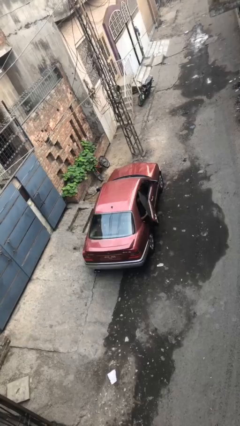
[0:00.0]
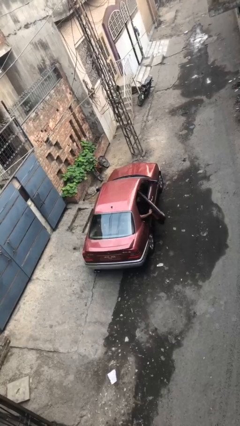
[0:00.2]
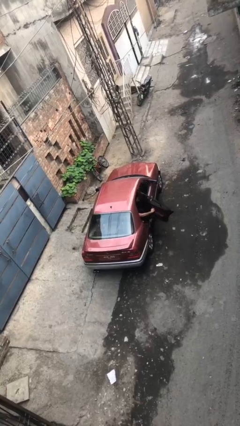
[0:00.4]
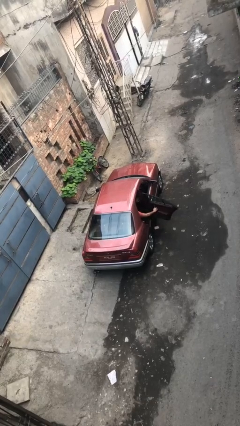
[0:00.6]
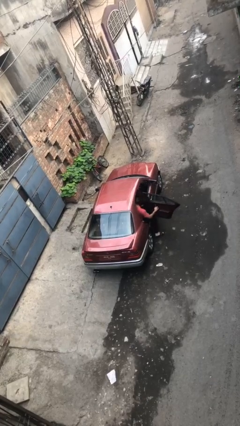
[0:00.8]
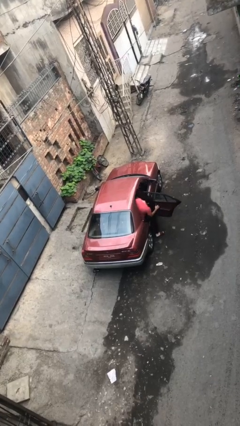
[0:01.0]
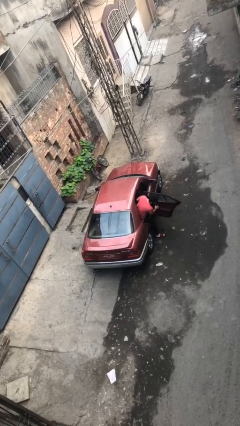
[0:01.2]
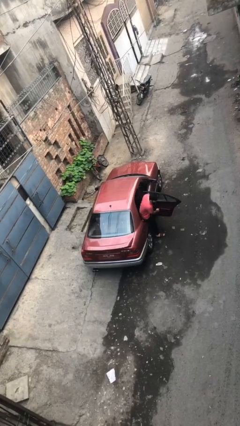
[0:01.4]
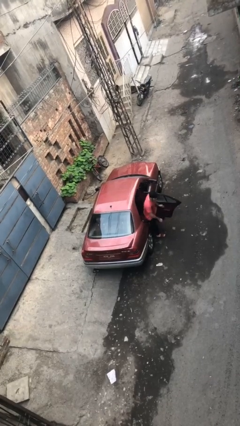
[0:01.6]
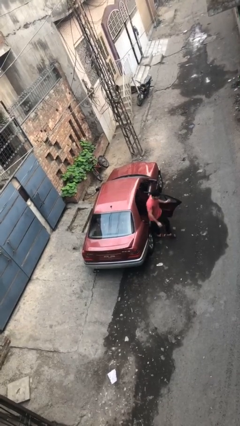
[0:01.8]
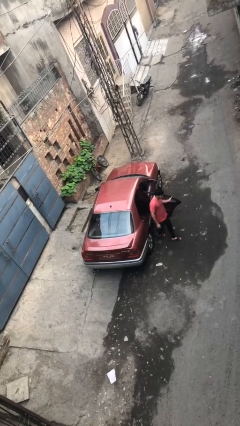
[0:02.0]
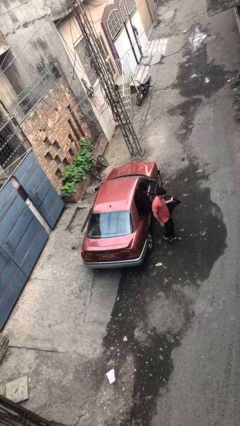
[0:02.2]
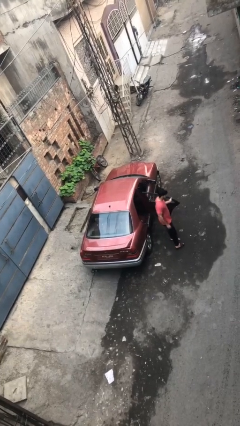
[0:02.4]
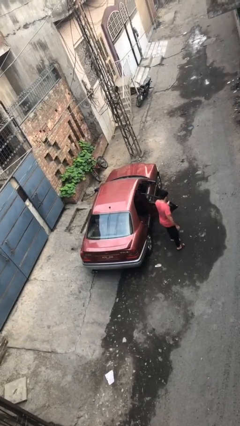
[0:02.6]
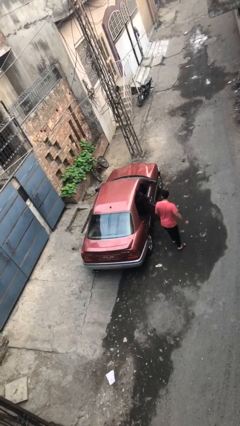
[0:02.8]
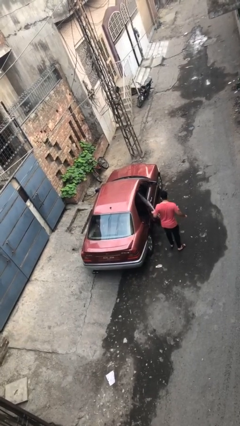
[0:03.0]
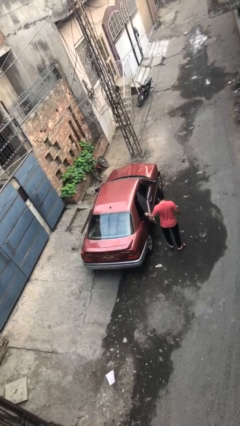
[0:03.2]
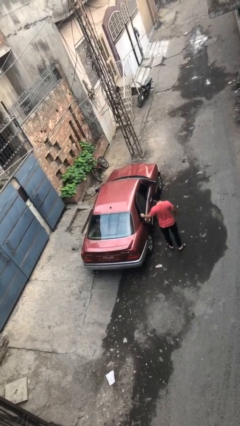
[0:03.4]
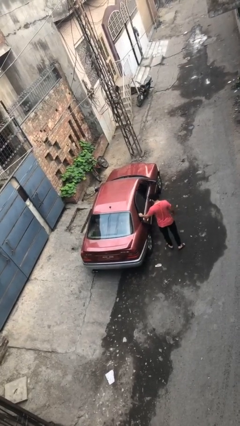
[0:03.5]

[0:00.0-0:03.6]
car drops off person

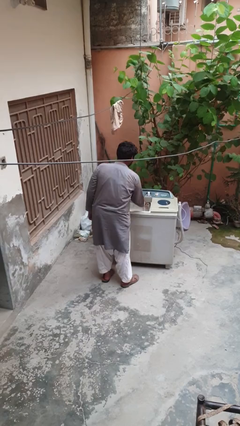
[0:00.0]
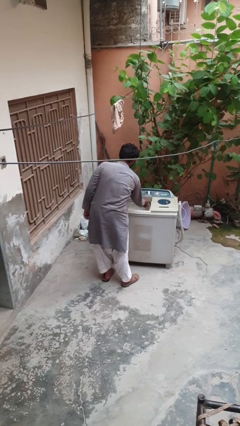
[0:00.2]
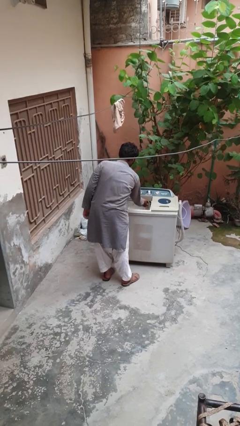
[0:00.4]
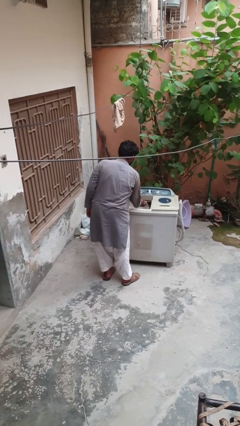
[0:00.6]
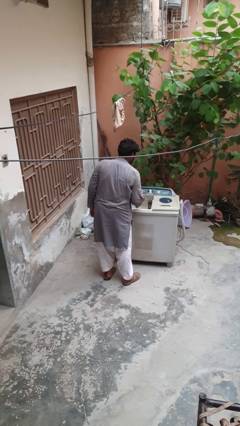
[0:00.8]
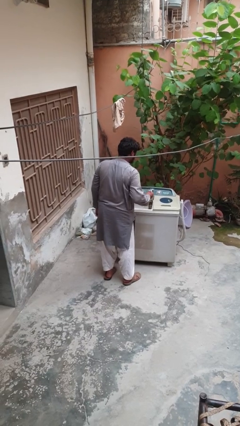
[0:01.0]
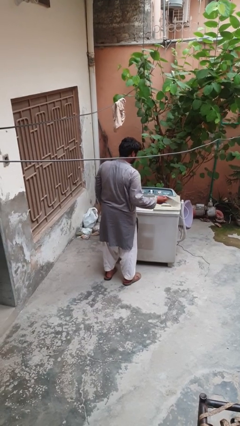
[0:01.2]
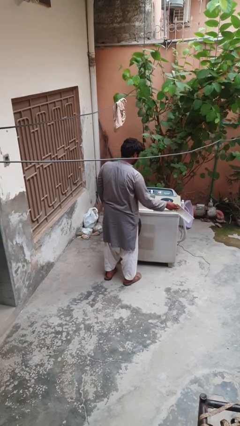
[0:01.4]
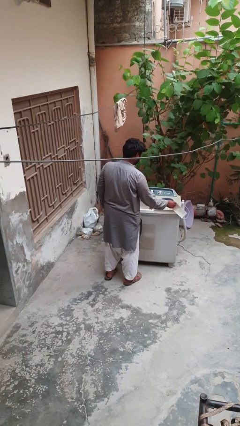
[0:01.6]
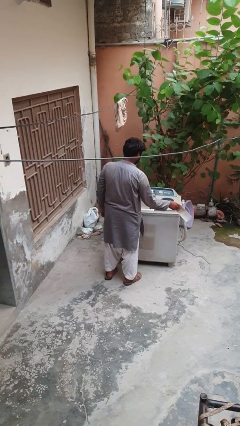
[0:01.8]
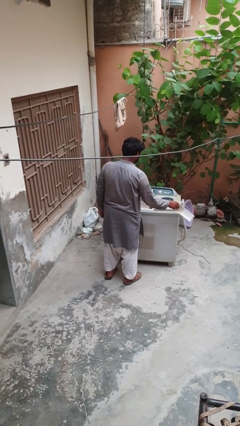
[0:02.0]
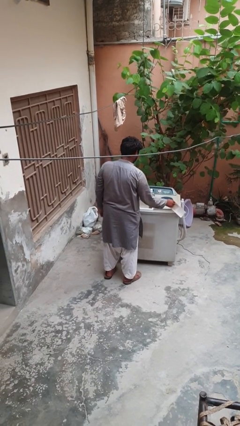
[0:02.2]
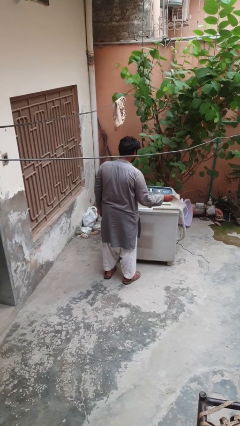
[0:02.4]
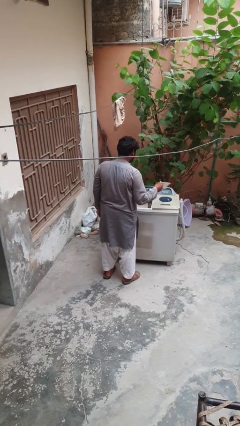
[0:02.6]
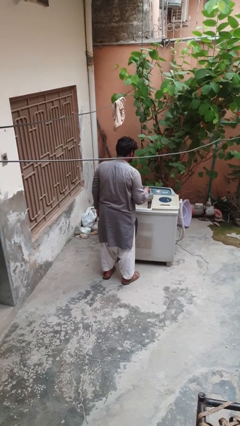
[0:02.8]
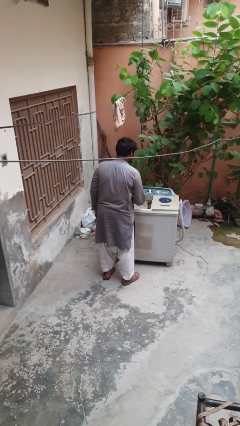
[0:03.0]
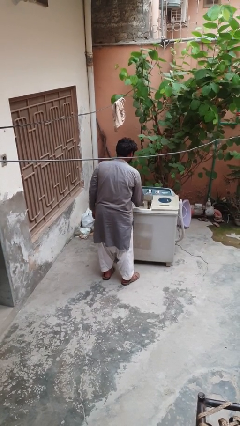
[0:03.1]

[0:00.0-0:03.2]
person cleans dryer lint trap

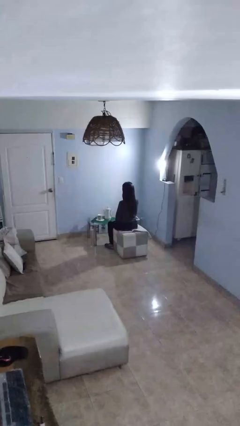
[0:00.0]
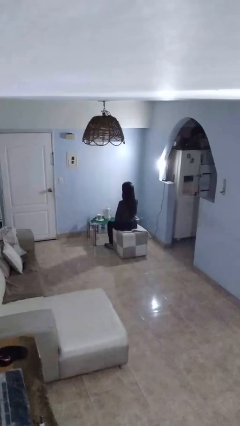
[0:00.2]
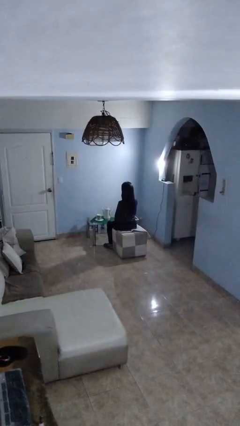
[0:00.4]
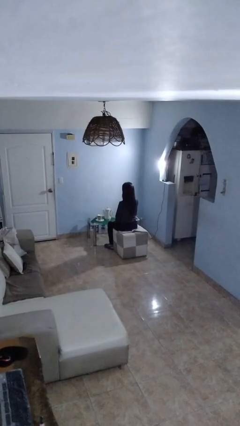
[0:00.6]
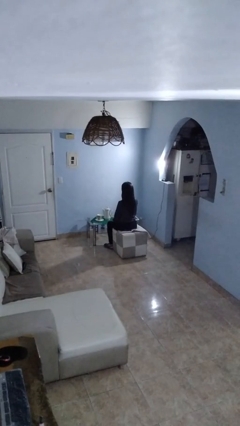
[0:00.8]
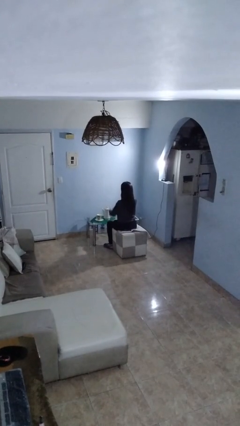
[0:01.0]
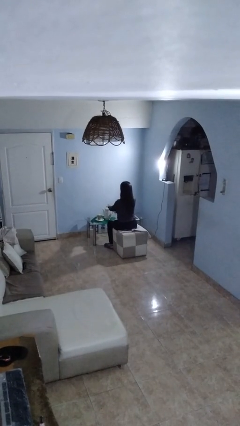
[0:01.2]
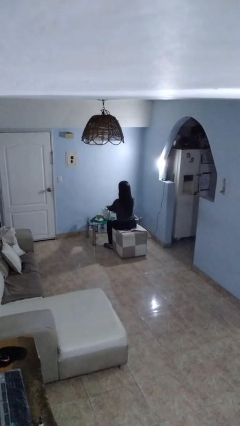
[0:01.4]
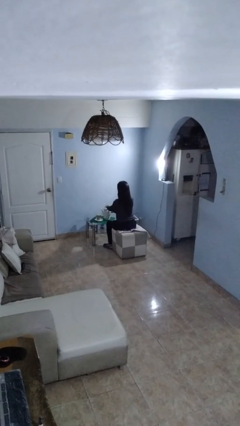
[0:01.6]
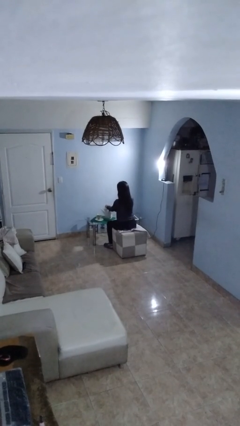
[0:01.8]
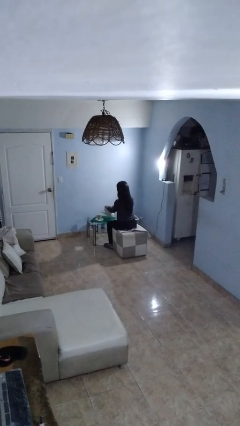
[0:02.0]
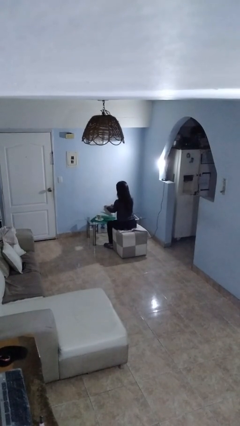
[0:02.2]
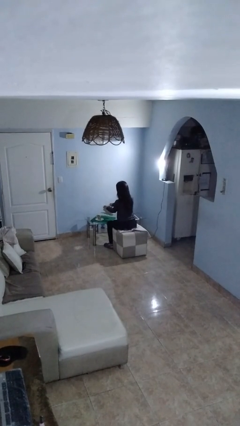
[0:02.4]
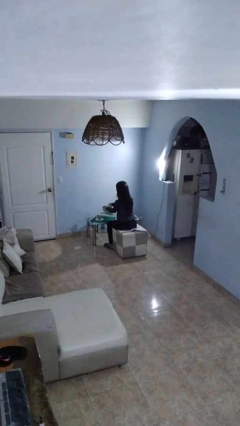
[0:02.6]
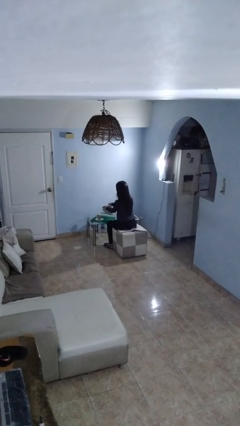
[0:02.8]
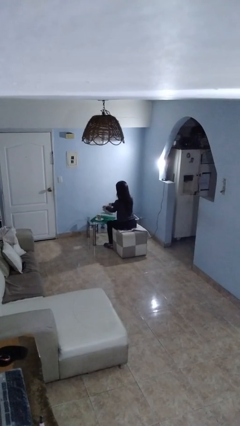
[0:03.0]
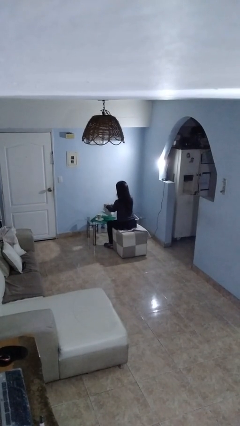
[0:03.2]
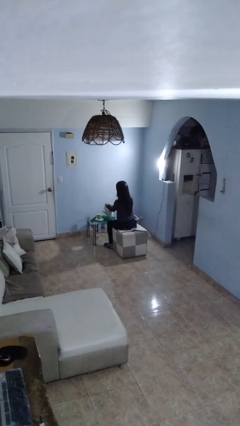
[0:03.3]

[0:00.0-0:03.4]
person pours coffee into mug

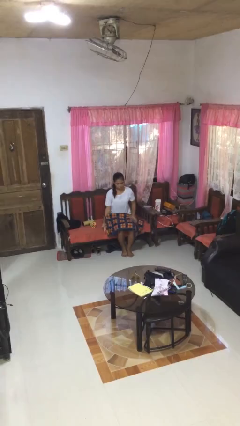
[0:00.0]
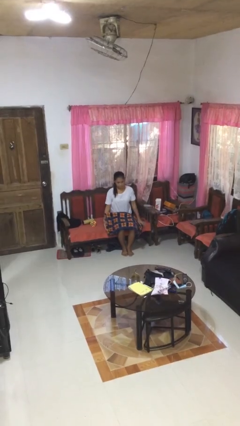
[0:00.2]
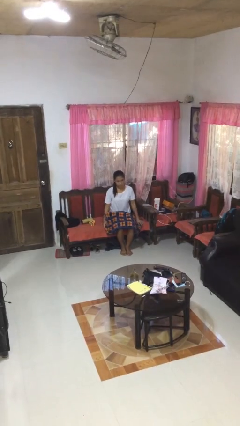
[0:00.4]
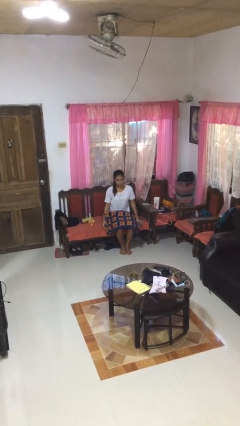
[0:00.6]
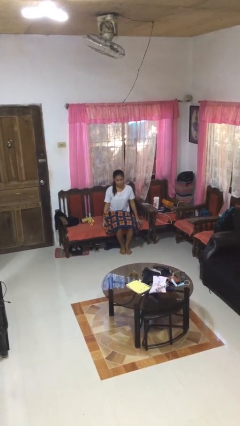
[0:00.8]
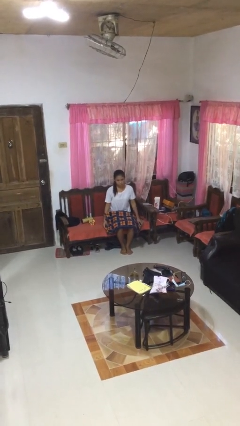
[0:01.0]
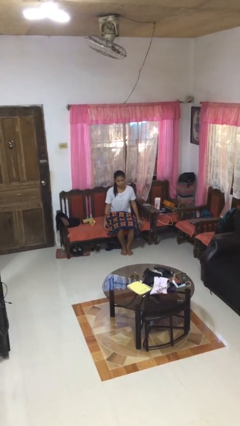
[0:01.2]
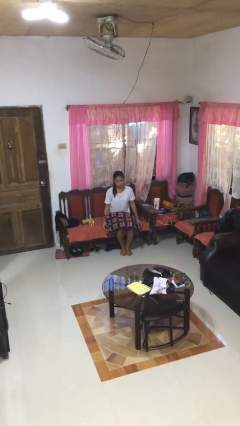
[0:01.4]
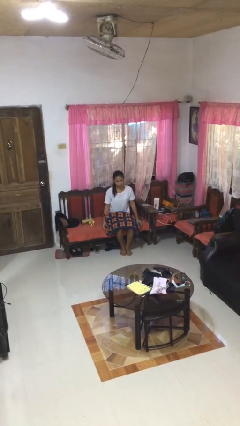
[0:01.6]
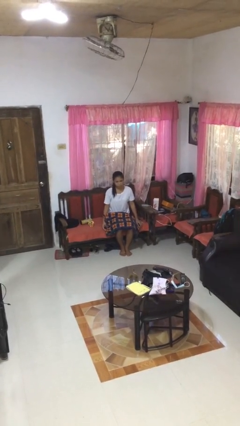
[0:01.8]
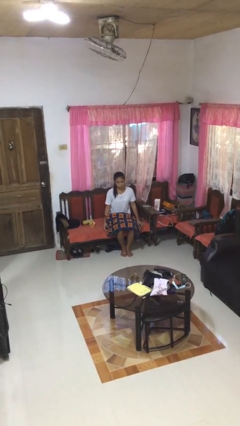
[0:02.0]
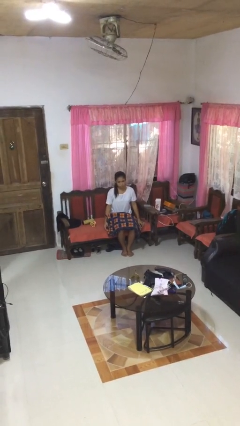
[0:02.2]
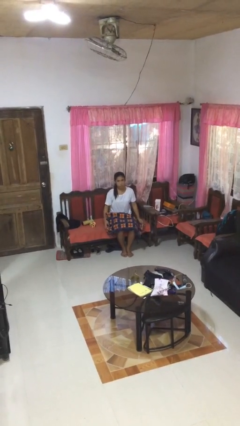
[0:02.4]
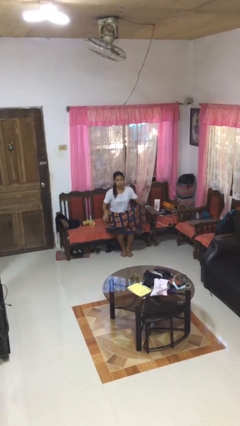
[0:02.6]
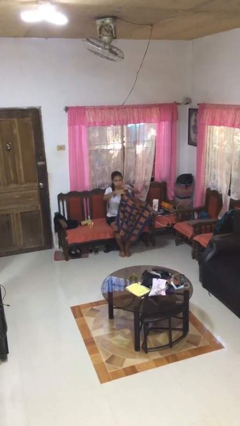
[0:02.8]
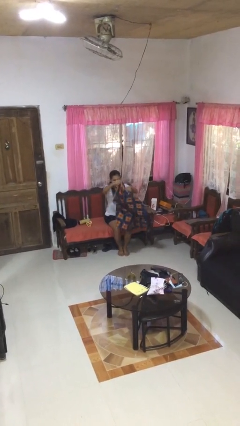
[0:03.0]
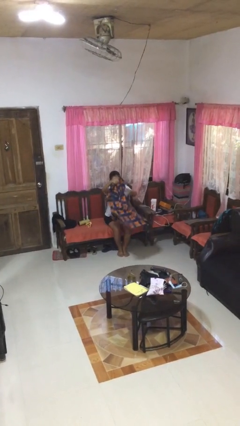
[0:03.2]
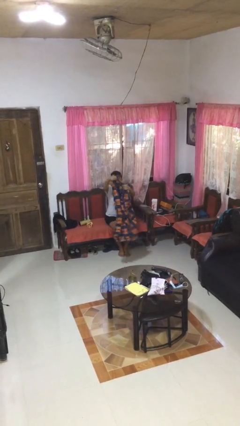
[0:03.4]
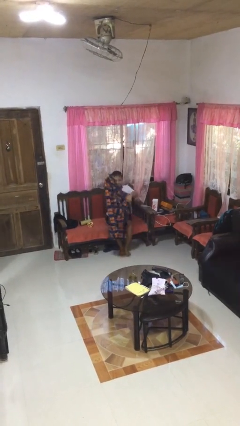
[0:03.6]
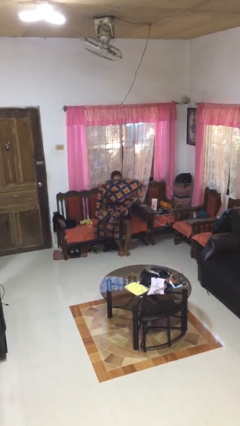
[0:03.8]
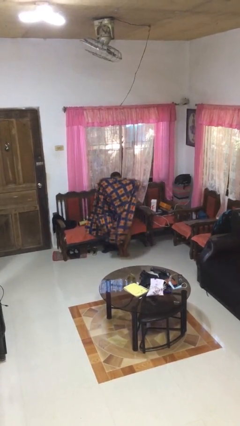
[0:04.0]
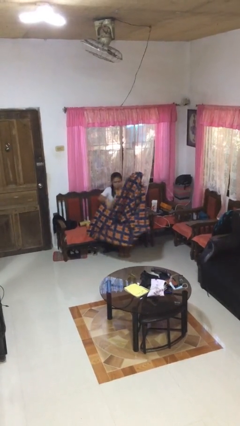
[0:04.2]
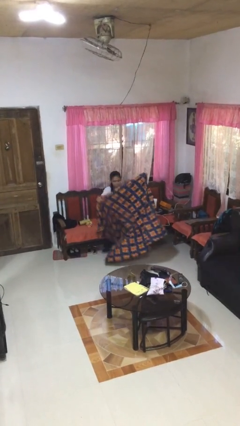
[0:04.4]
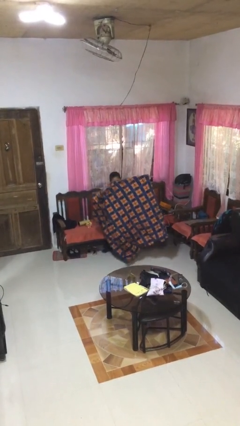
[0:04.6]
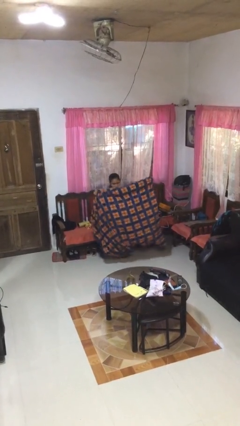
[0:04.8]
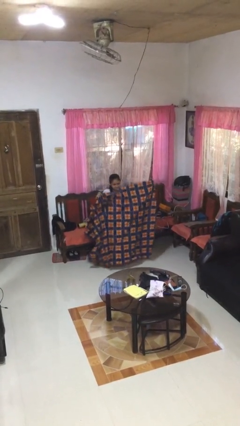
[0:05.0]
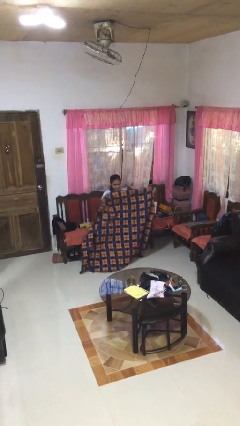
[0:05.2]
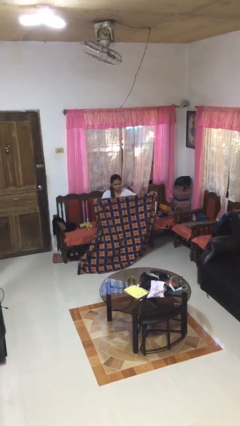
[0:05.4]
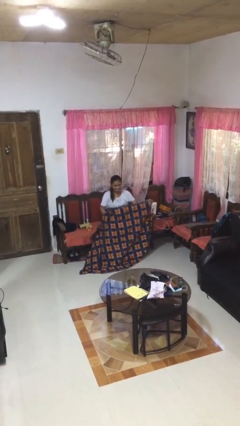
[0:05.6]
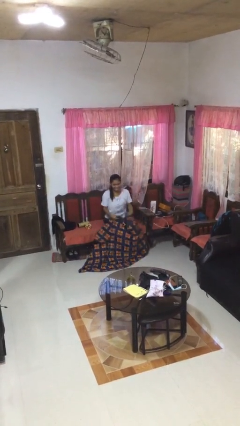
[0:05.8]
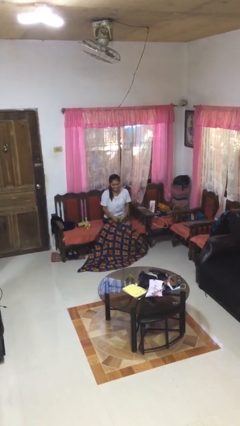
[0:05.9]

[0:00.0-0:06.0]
person unfolds blanket

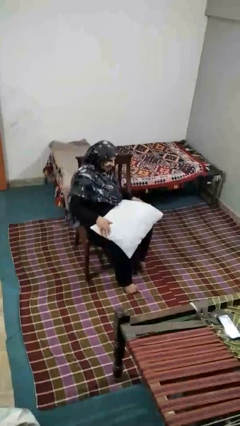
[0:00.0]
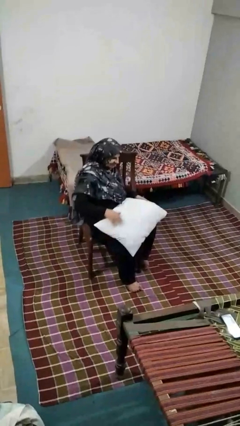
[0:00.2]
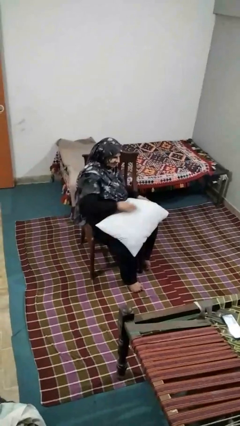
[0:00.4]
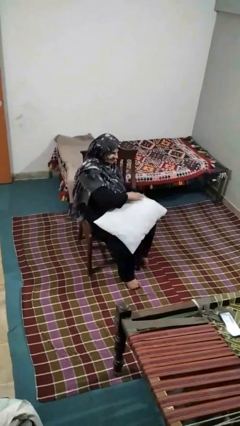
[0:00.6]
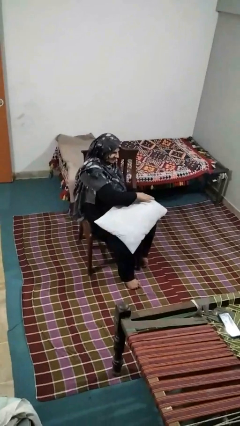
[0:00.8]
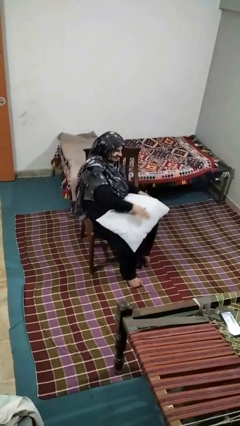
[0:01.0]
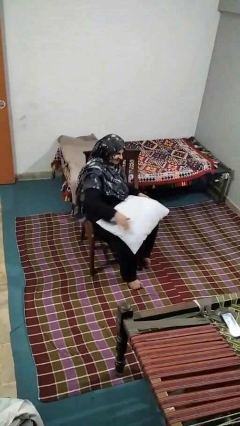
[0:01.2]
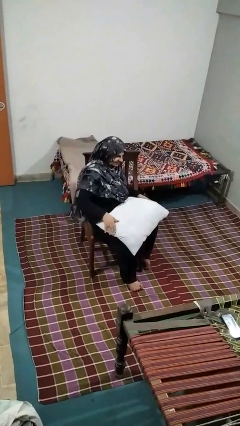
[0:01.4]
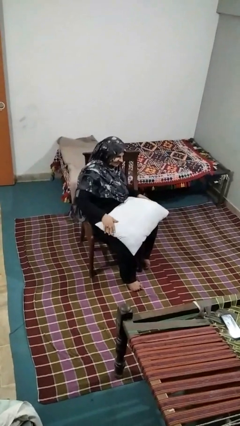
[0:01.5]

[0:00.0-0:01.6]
person waves hand over object
